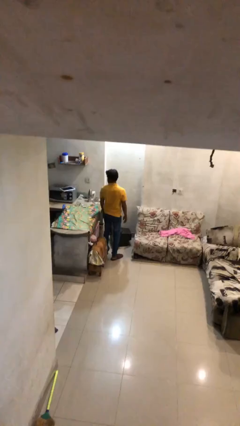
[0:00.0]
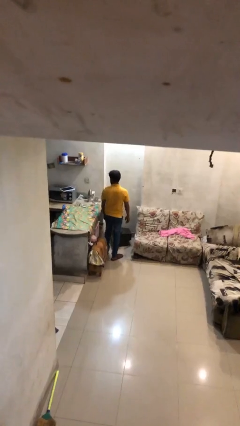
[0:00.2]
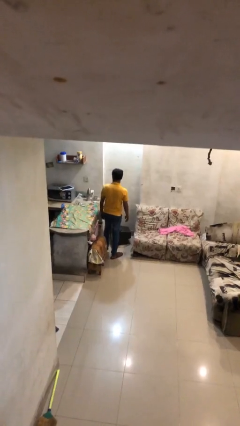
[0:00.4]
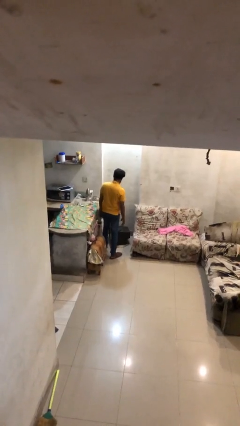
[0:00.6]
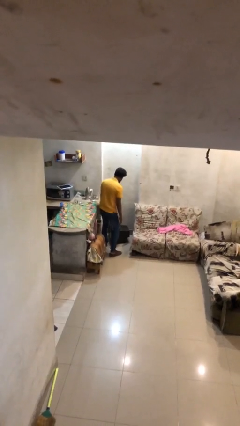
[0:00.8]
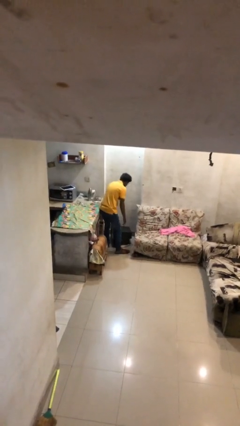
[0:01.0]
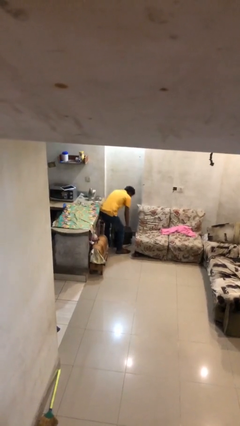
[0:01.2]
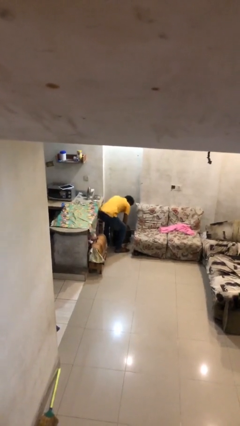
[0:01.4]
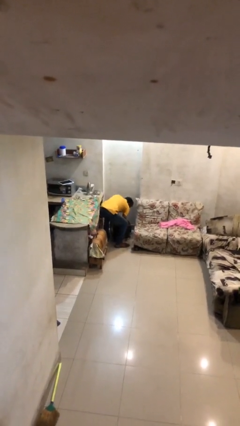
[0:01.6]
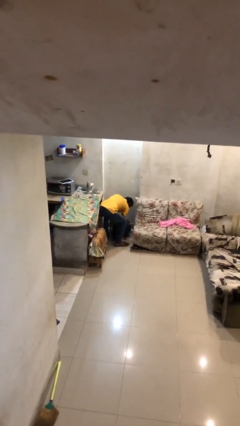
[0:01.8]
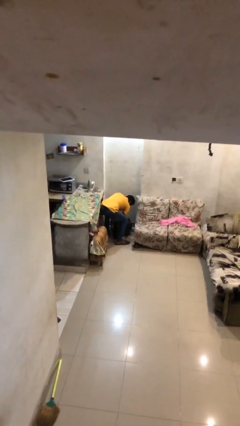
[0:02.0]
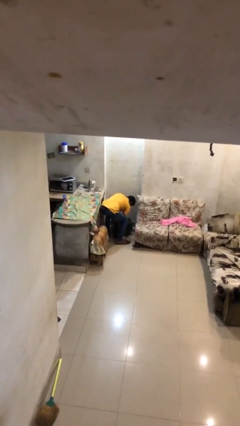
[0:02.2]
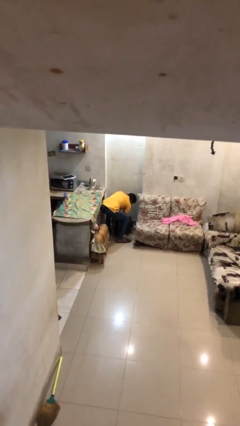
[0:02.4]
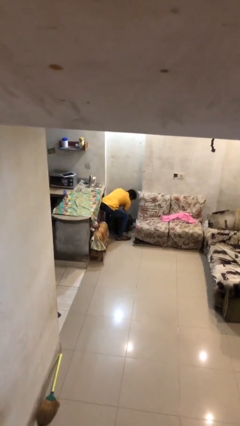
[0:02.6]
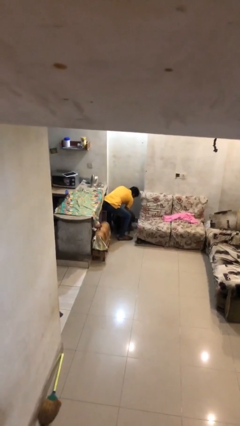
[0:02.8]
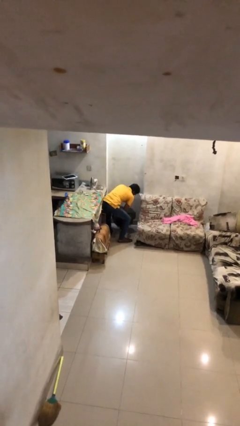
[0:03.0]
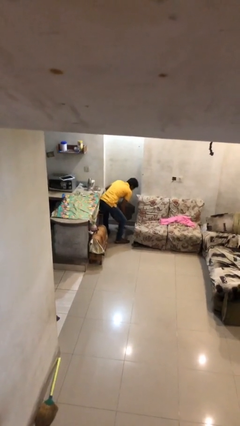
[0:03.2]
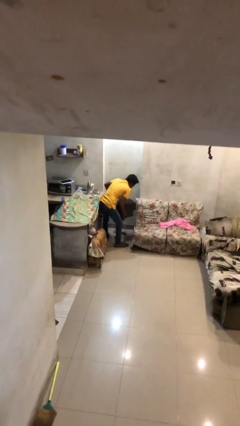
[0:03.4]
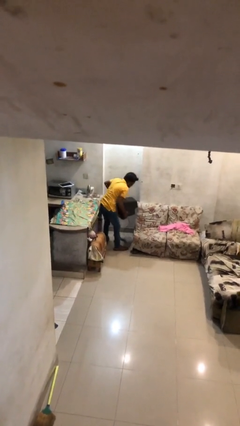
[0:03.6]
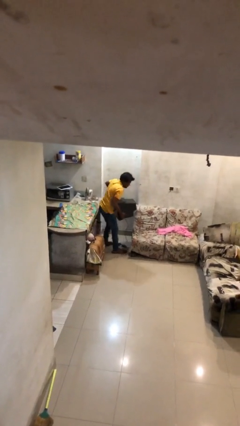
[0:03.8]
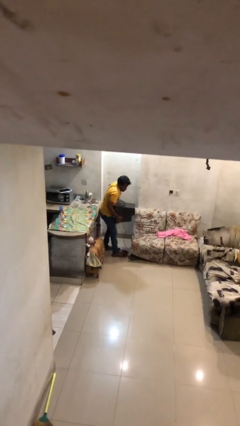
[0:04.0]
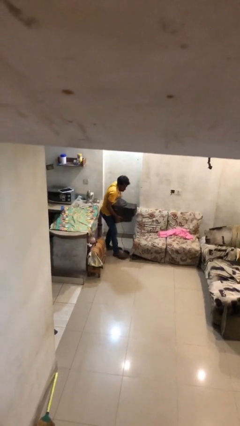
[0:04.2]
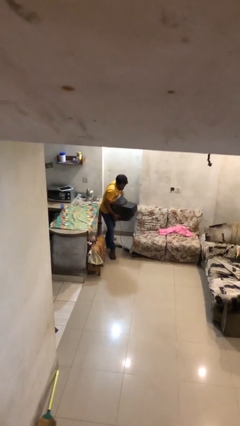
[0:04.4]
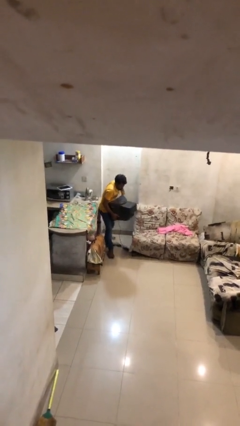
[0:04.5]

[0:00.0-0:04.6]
person picks up object from floor

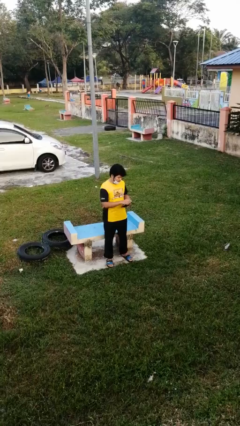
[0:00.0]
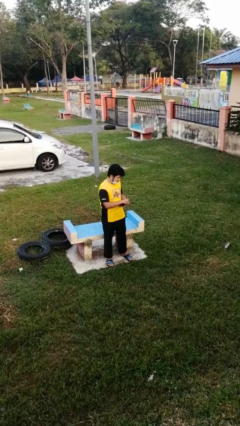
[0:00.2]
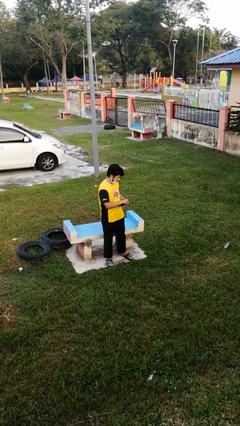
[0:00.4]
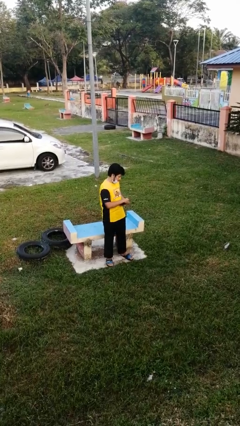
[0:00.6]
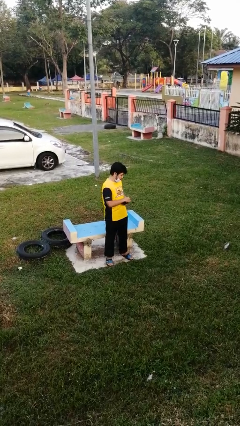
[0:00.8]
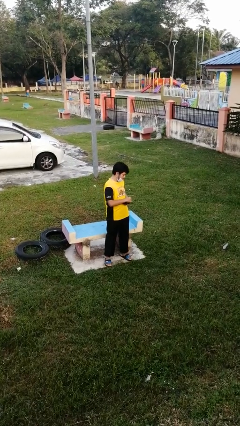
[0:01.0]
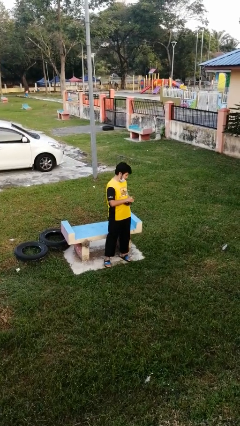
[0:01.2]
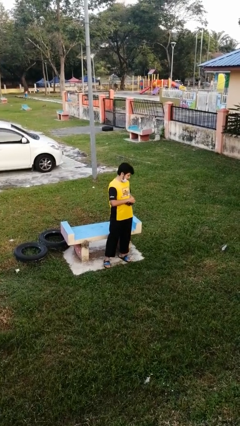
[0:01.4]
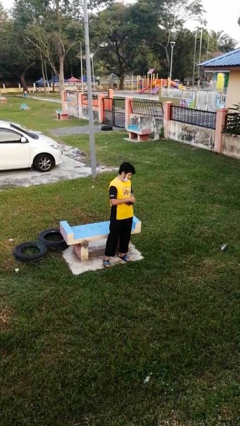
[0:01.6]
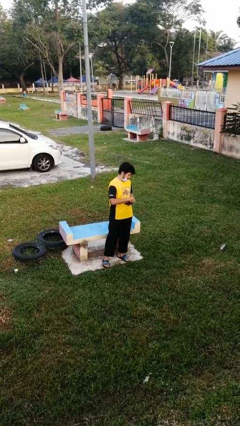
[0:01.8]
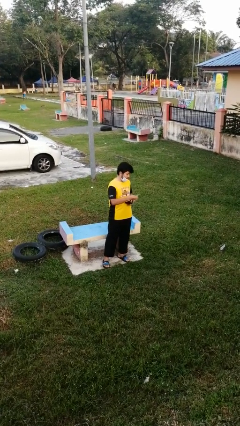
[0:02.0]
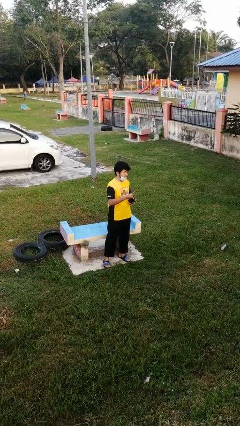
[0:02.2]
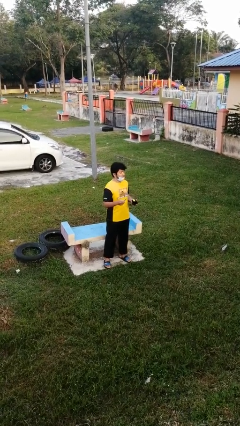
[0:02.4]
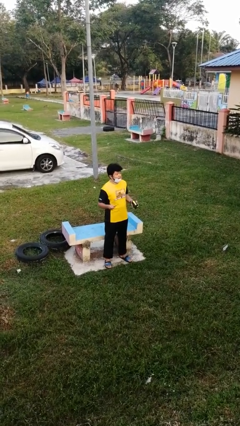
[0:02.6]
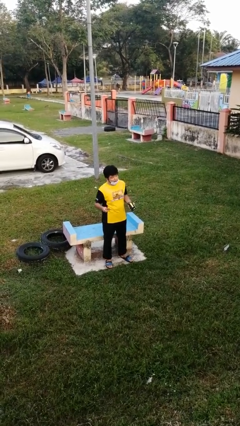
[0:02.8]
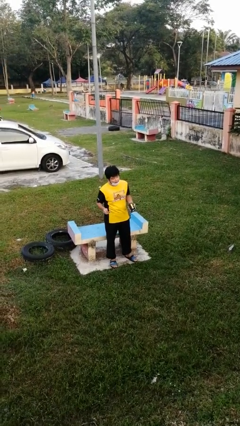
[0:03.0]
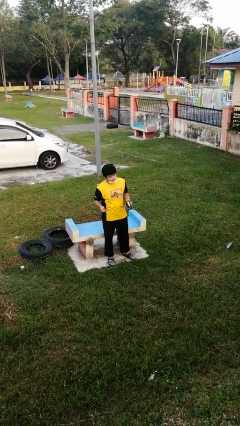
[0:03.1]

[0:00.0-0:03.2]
person takes object from purse

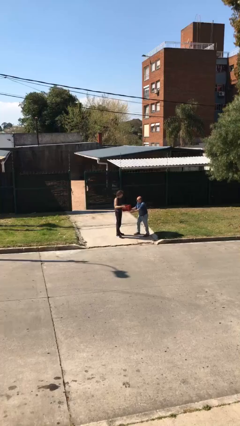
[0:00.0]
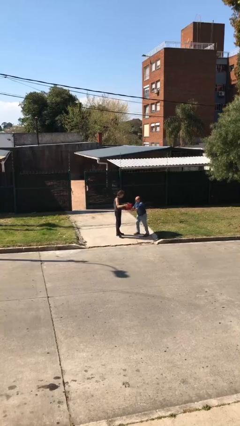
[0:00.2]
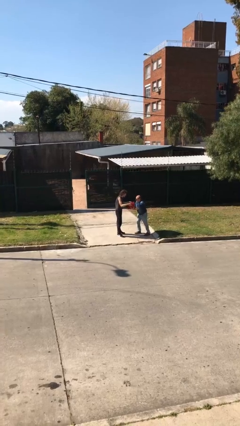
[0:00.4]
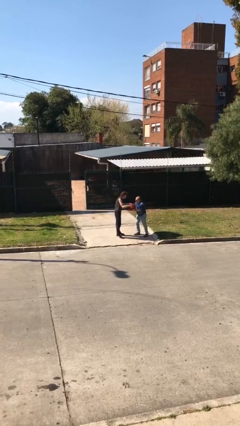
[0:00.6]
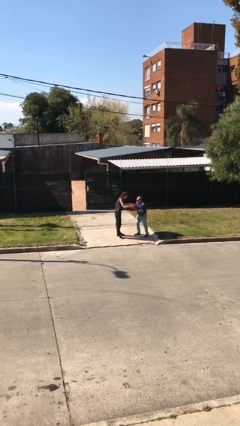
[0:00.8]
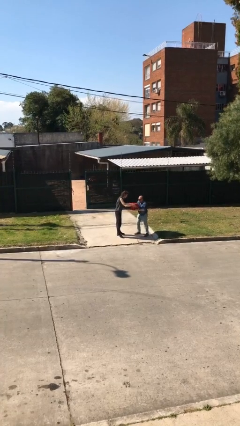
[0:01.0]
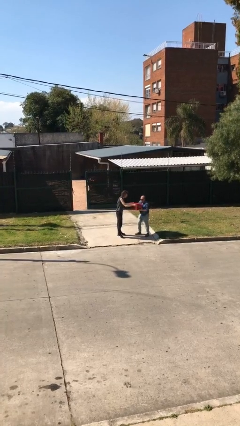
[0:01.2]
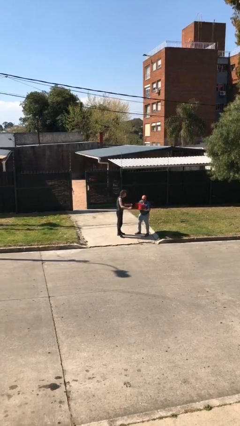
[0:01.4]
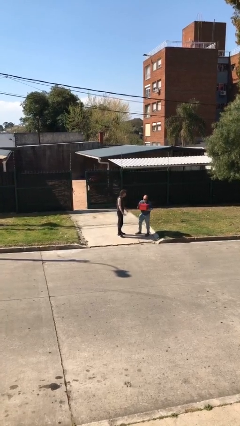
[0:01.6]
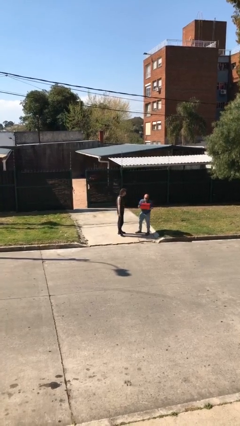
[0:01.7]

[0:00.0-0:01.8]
person transfers object to person

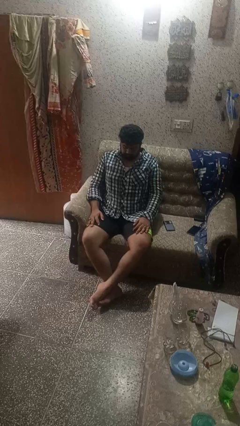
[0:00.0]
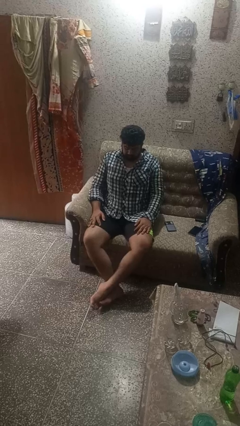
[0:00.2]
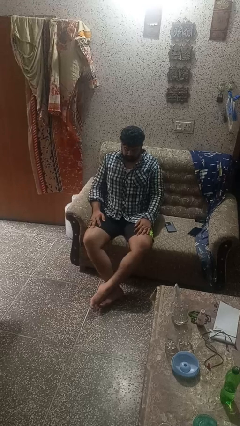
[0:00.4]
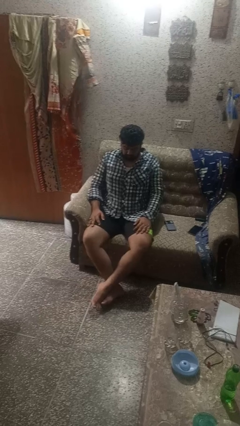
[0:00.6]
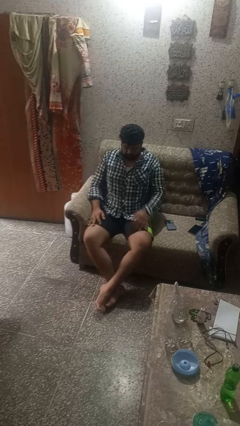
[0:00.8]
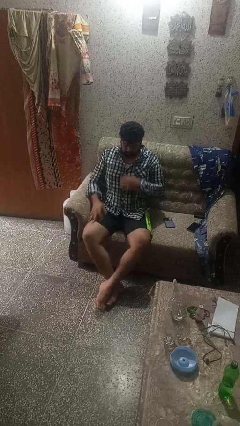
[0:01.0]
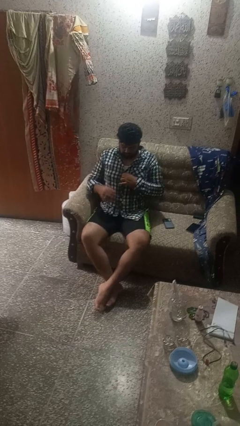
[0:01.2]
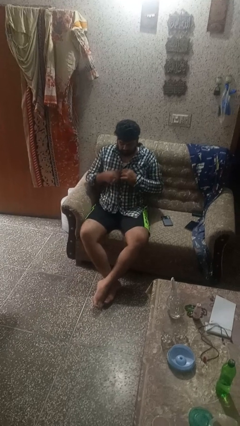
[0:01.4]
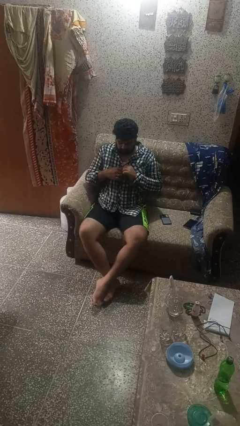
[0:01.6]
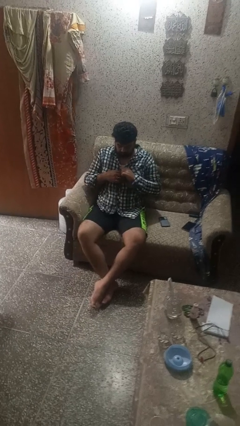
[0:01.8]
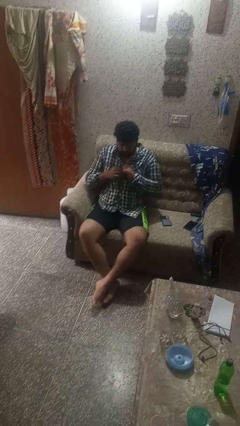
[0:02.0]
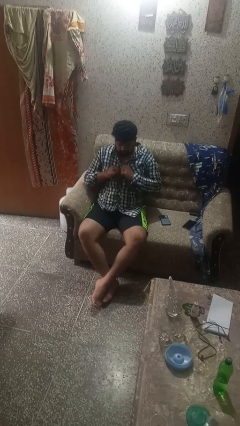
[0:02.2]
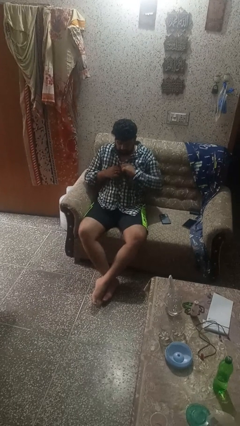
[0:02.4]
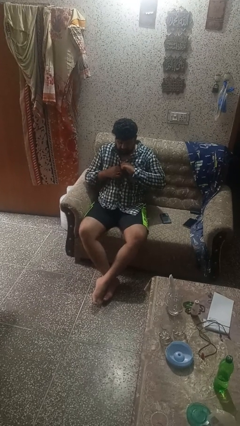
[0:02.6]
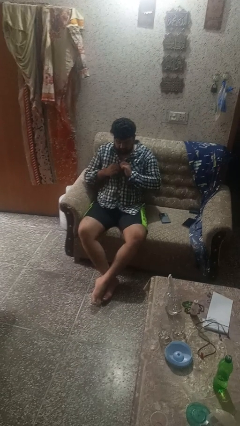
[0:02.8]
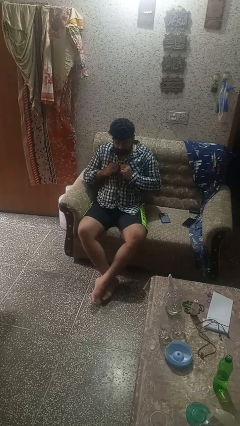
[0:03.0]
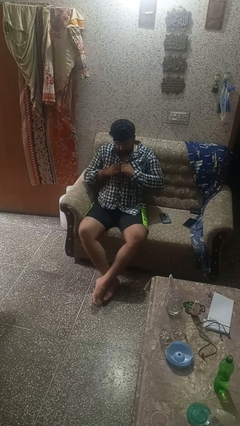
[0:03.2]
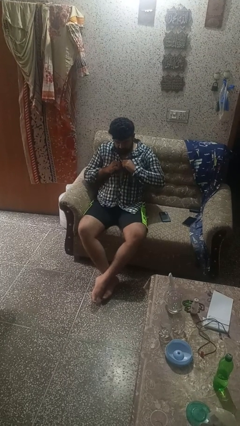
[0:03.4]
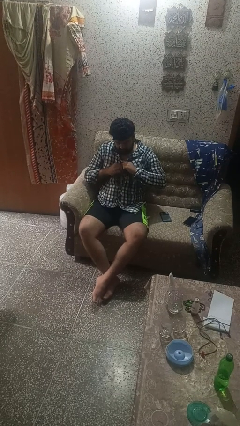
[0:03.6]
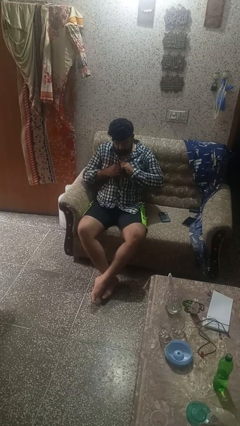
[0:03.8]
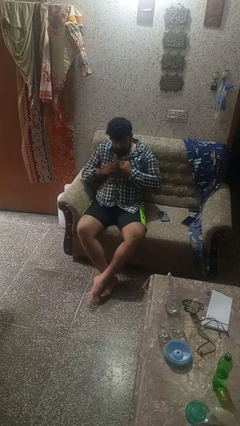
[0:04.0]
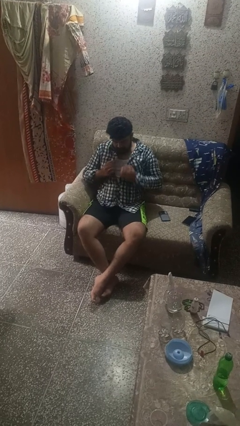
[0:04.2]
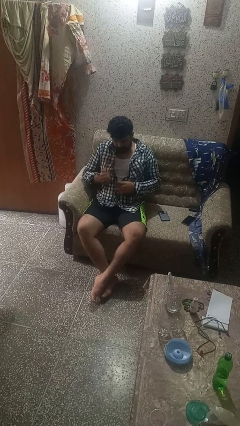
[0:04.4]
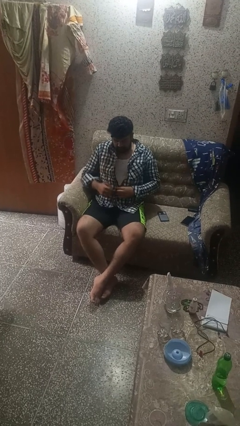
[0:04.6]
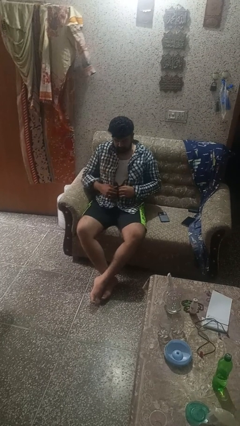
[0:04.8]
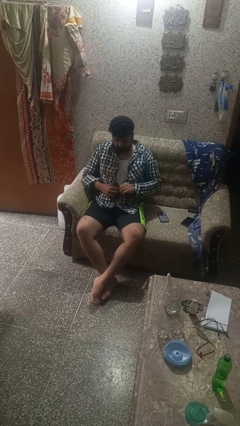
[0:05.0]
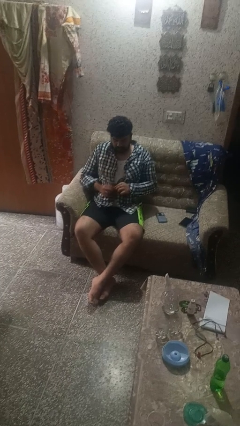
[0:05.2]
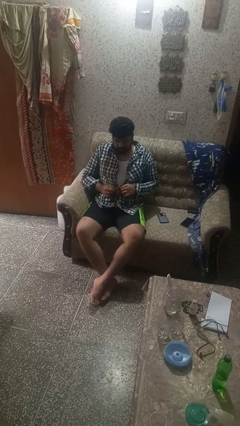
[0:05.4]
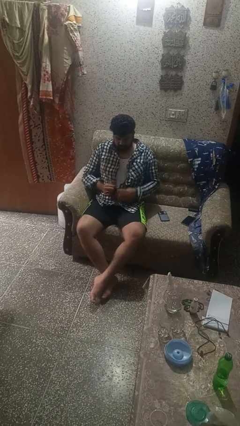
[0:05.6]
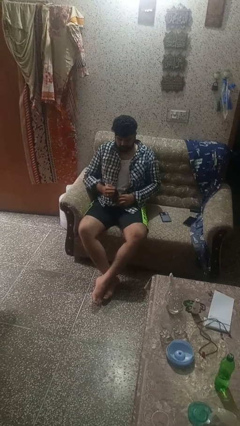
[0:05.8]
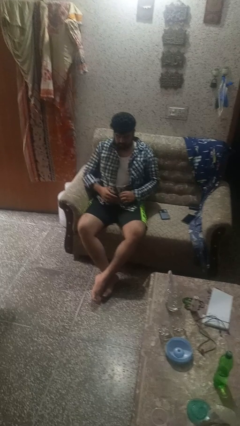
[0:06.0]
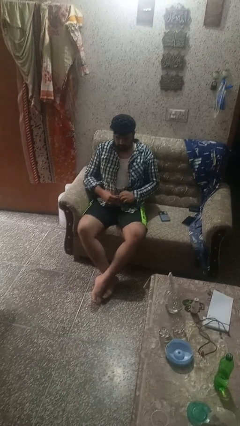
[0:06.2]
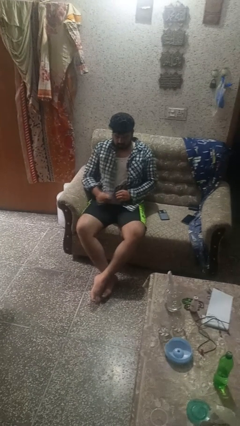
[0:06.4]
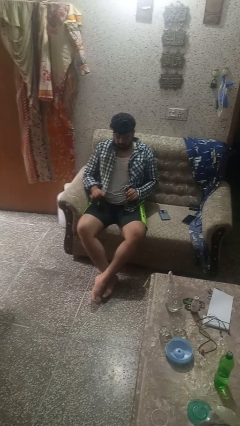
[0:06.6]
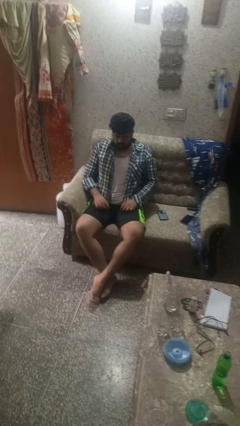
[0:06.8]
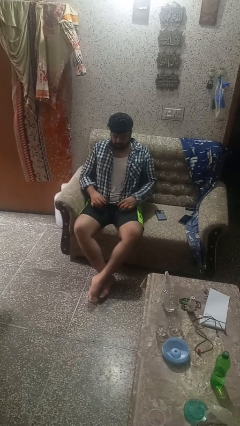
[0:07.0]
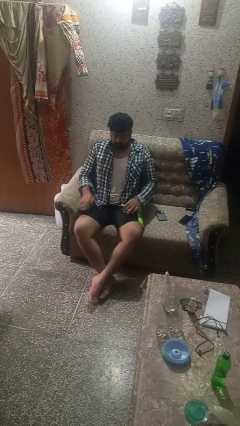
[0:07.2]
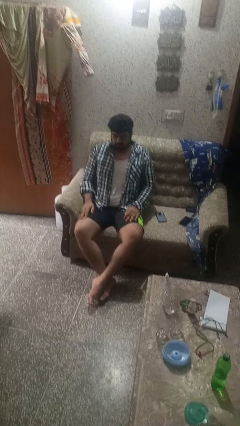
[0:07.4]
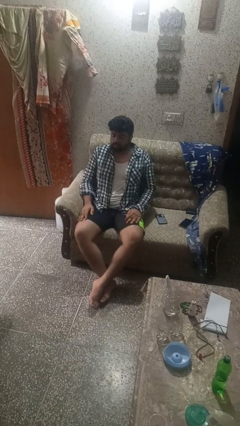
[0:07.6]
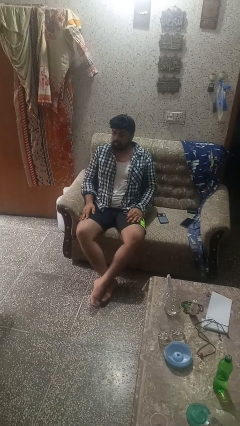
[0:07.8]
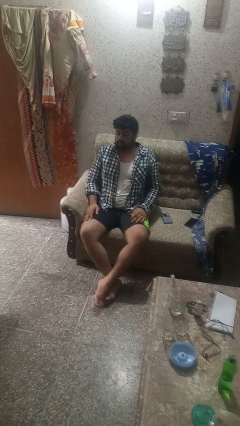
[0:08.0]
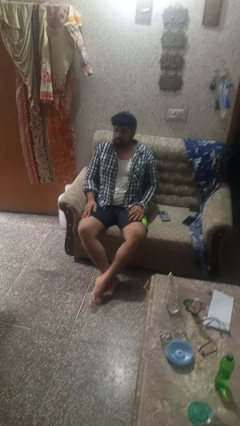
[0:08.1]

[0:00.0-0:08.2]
person unbuttons shirt
